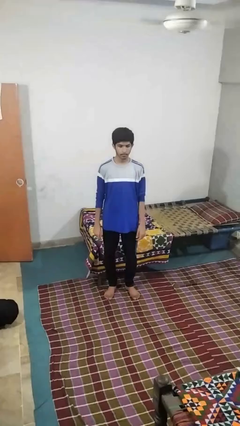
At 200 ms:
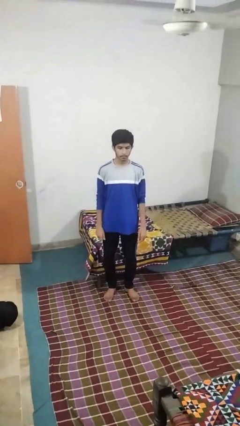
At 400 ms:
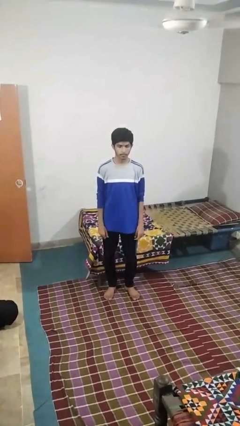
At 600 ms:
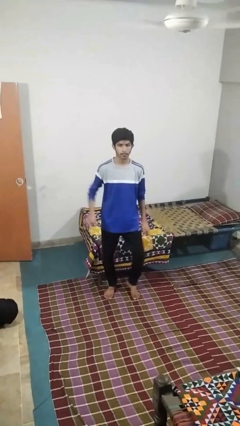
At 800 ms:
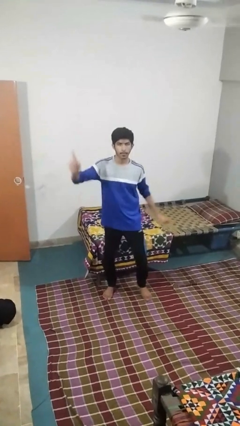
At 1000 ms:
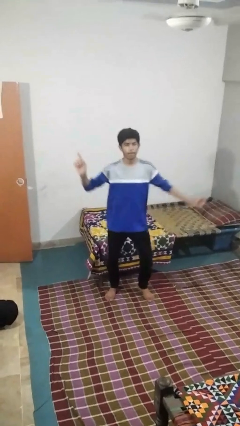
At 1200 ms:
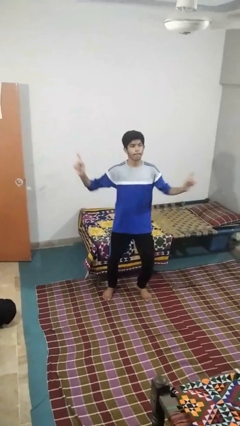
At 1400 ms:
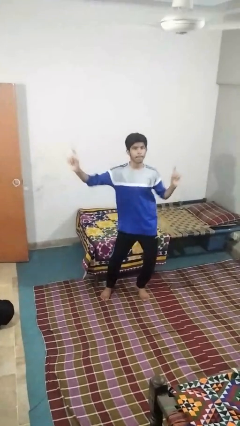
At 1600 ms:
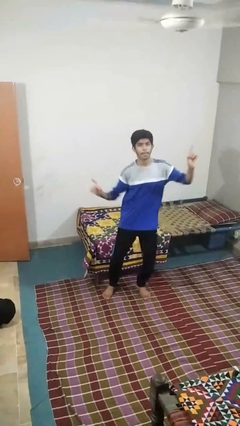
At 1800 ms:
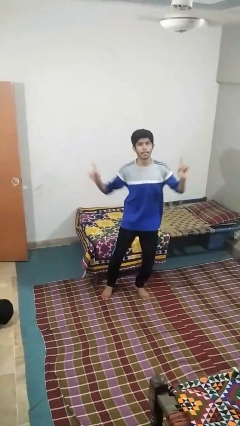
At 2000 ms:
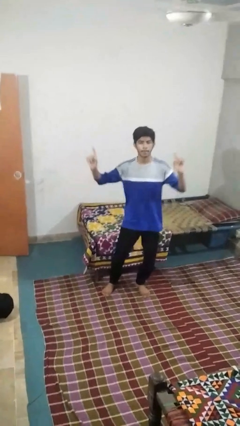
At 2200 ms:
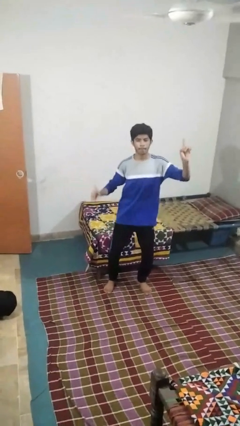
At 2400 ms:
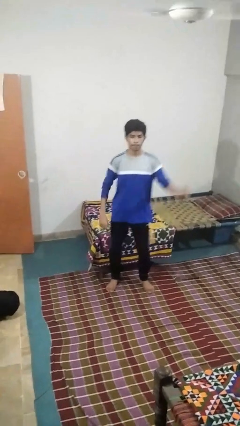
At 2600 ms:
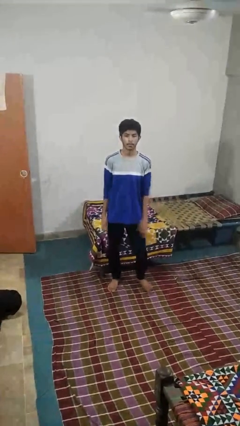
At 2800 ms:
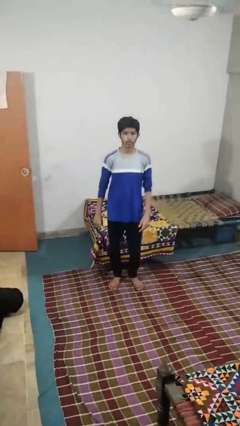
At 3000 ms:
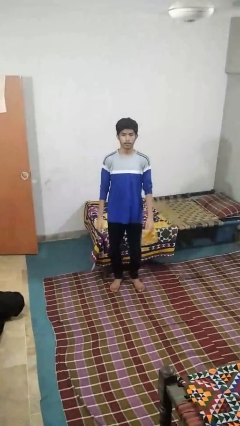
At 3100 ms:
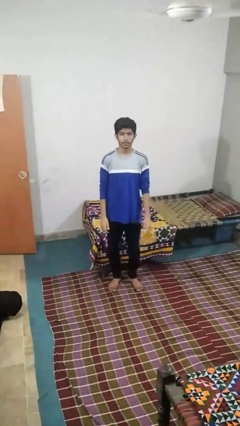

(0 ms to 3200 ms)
person dances in place

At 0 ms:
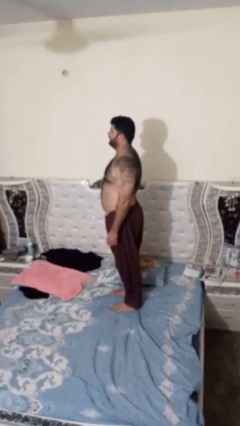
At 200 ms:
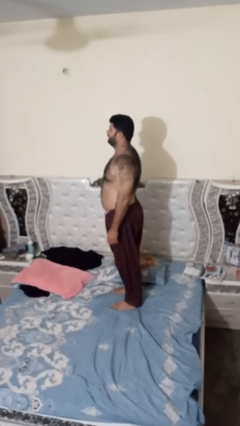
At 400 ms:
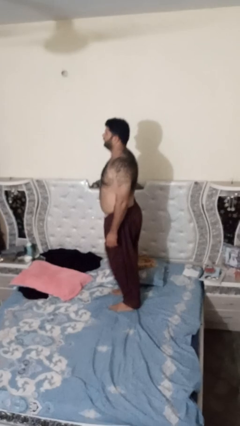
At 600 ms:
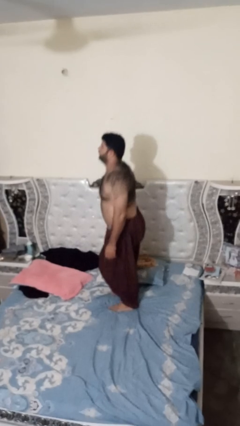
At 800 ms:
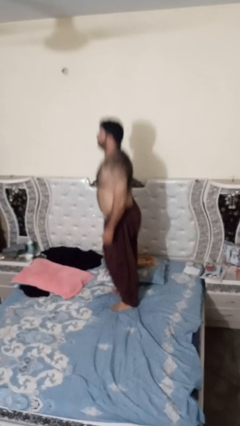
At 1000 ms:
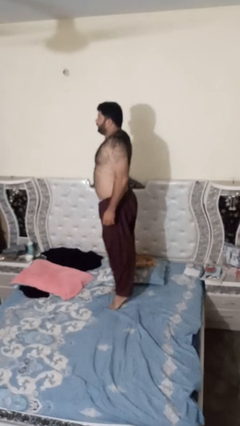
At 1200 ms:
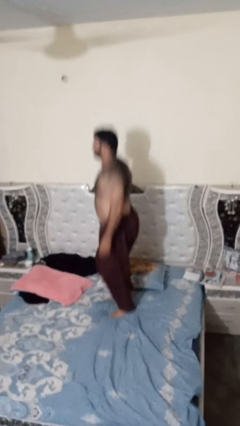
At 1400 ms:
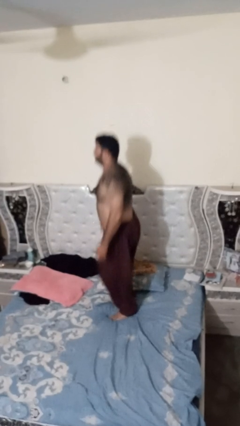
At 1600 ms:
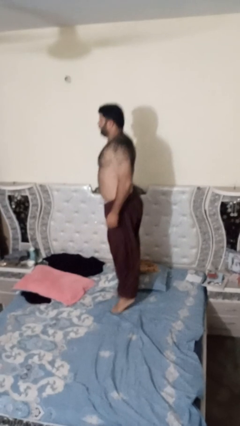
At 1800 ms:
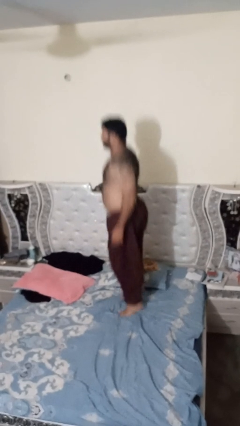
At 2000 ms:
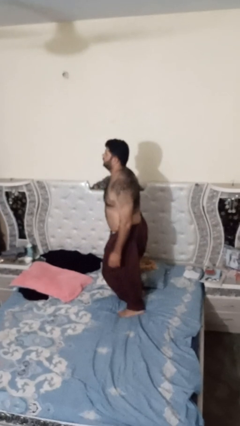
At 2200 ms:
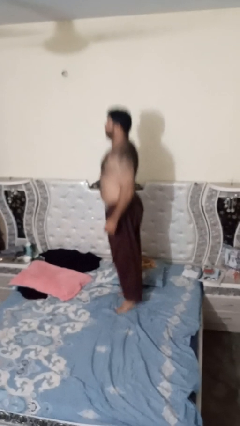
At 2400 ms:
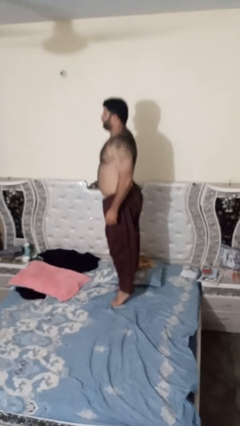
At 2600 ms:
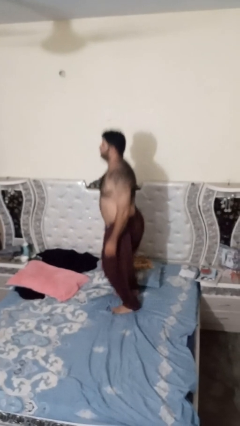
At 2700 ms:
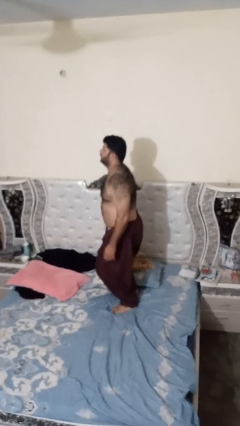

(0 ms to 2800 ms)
person jumps on bed

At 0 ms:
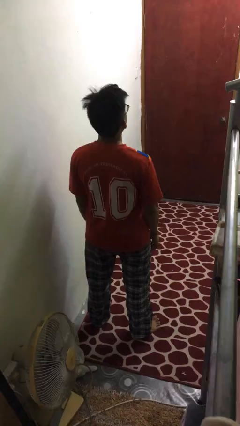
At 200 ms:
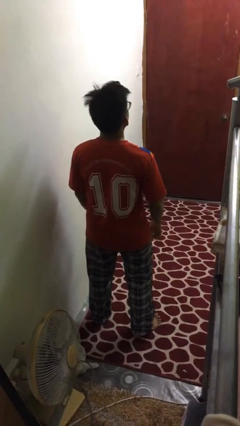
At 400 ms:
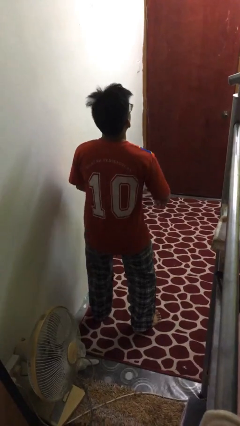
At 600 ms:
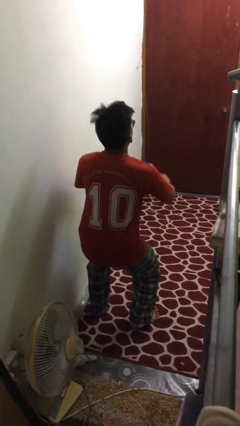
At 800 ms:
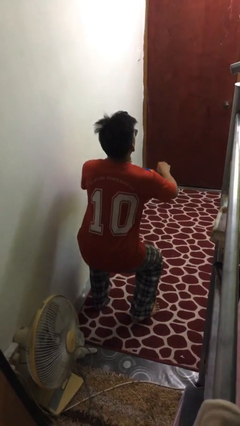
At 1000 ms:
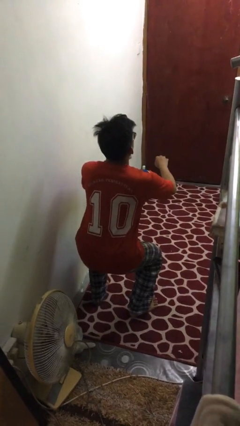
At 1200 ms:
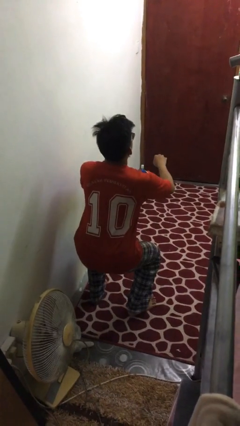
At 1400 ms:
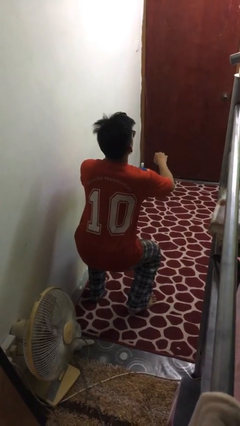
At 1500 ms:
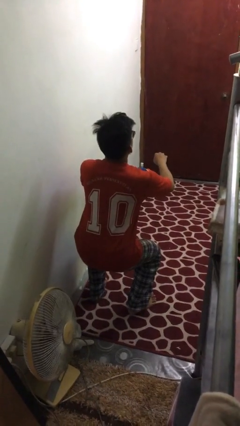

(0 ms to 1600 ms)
person squats

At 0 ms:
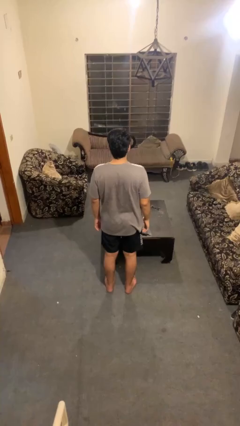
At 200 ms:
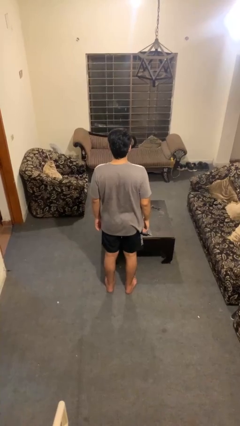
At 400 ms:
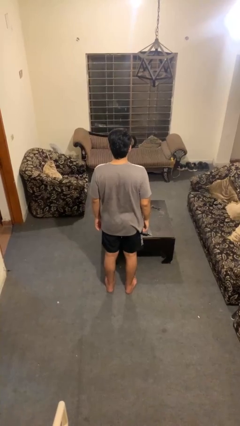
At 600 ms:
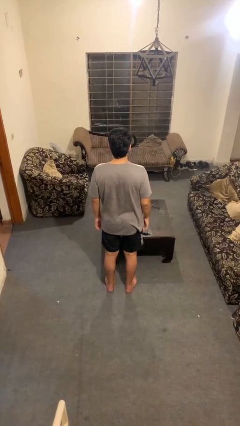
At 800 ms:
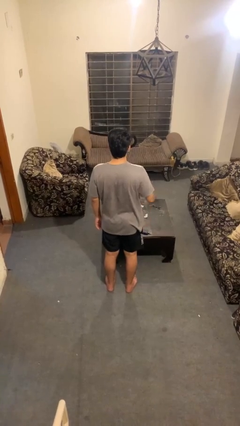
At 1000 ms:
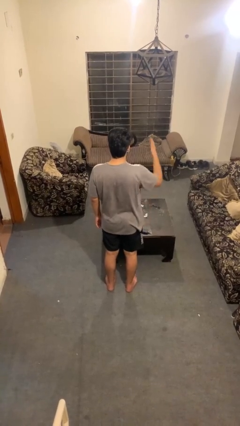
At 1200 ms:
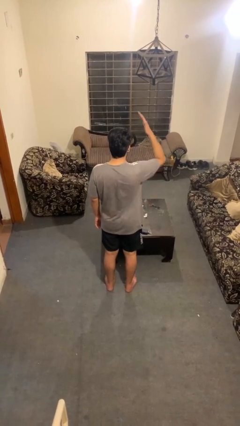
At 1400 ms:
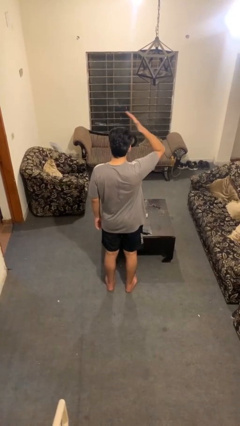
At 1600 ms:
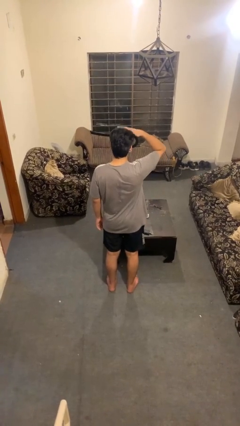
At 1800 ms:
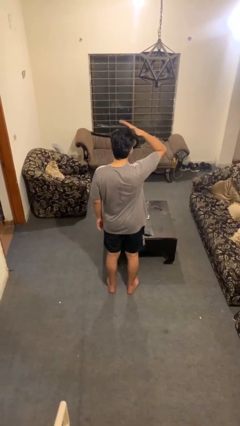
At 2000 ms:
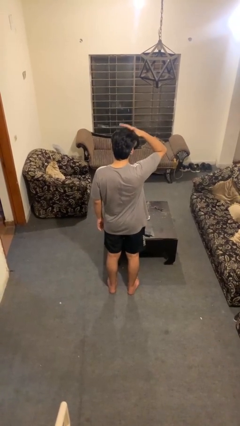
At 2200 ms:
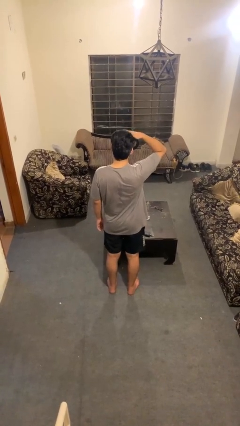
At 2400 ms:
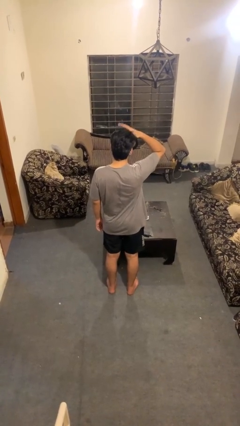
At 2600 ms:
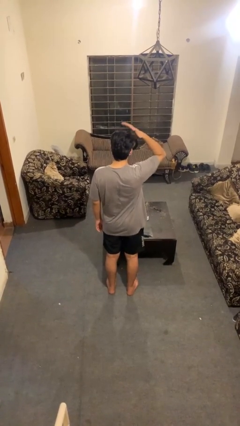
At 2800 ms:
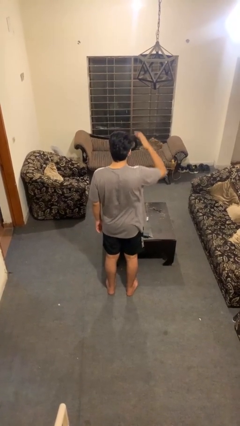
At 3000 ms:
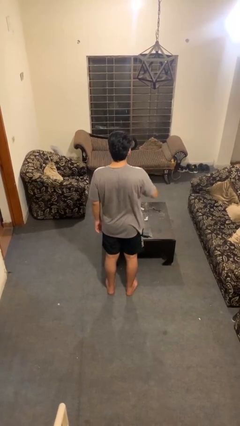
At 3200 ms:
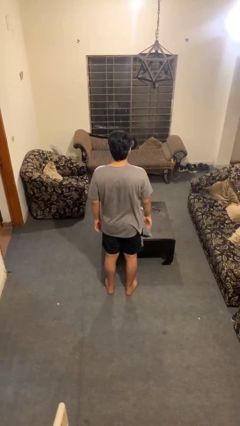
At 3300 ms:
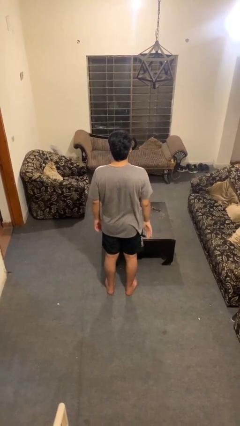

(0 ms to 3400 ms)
person pats head

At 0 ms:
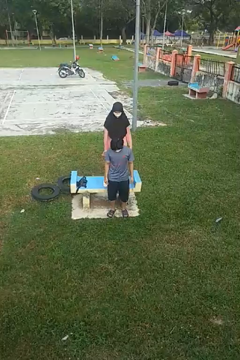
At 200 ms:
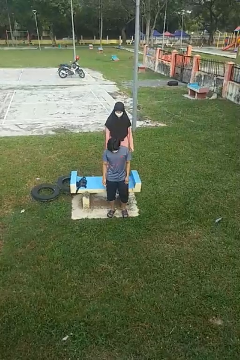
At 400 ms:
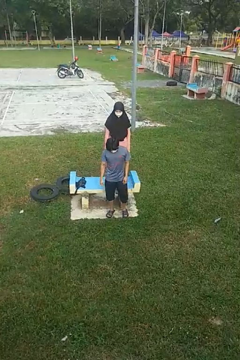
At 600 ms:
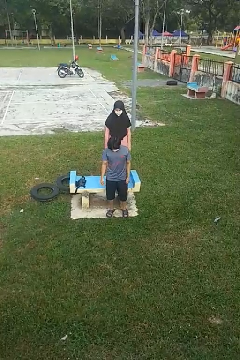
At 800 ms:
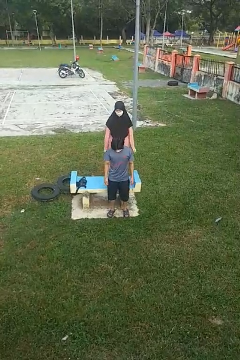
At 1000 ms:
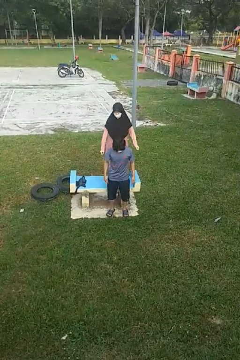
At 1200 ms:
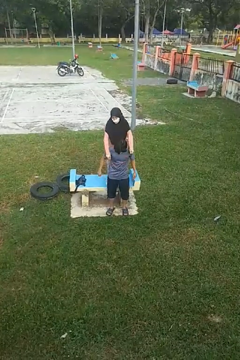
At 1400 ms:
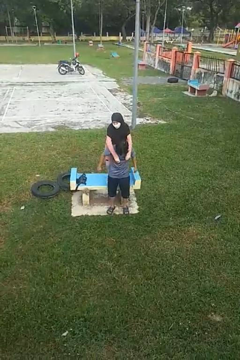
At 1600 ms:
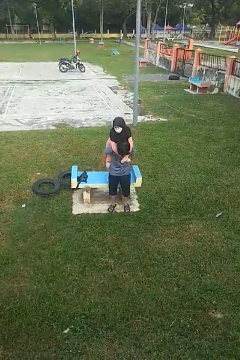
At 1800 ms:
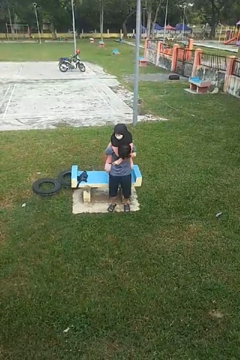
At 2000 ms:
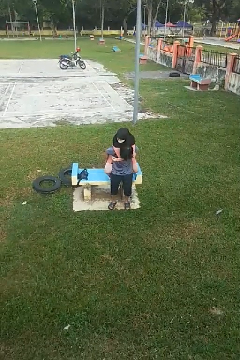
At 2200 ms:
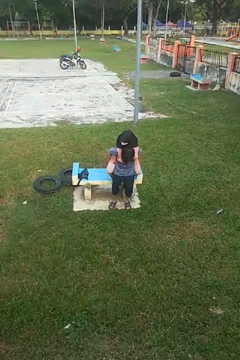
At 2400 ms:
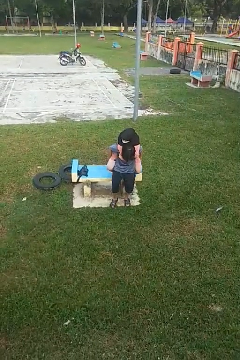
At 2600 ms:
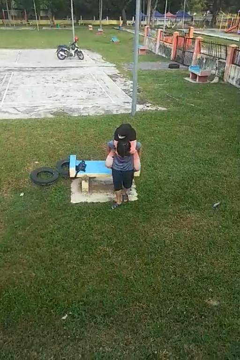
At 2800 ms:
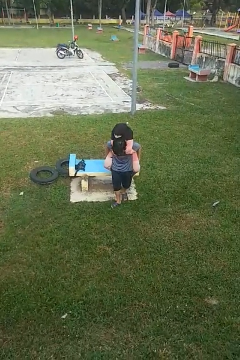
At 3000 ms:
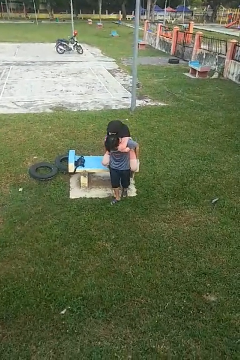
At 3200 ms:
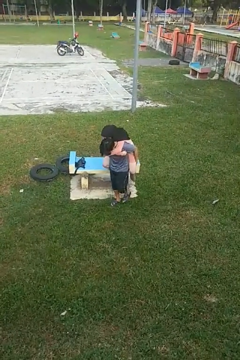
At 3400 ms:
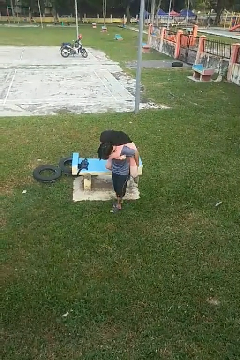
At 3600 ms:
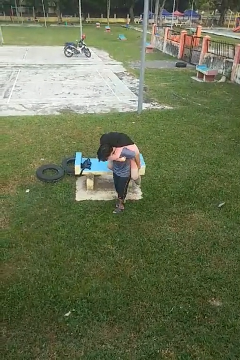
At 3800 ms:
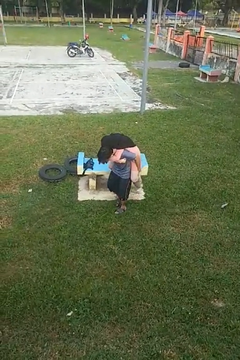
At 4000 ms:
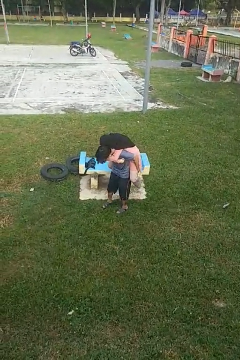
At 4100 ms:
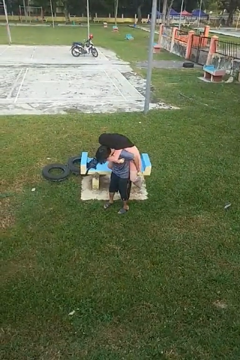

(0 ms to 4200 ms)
person carries person over shoulder

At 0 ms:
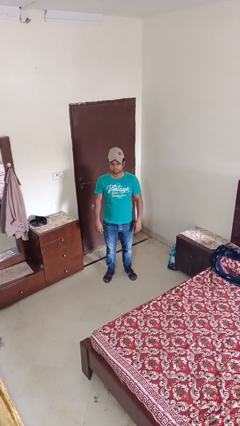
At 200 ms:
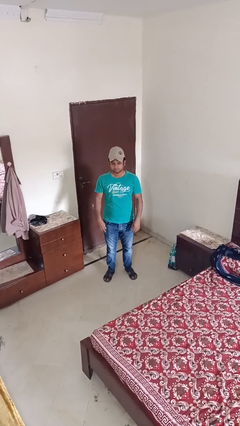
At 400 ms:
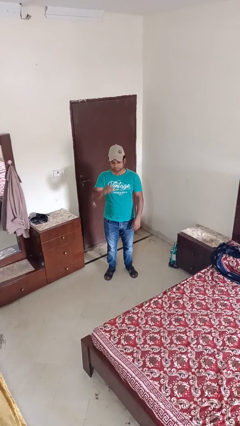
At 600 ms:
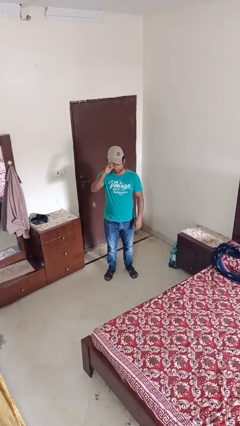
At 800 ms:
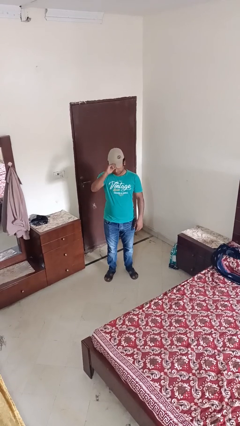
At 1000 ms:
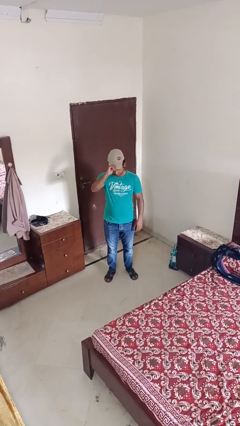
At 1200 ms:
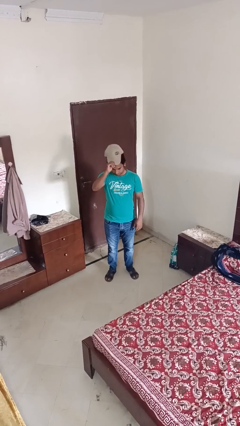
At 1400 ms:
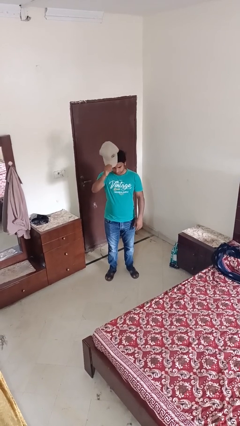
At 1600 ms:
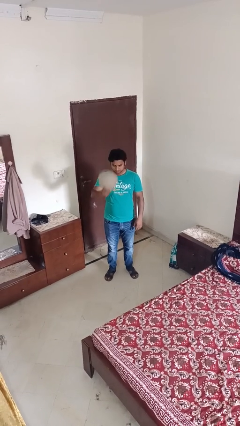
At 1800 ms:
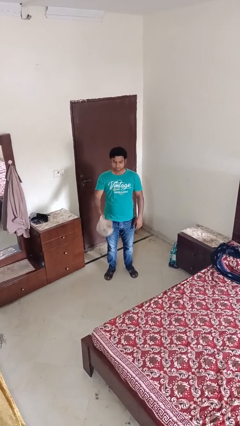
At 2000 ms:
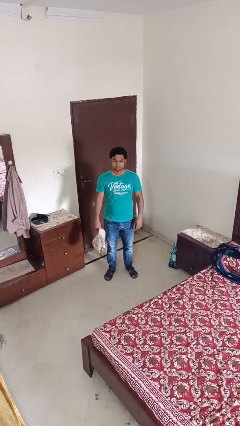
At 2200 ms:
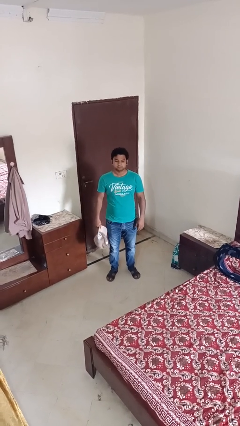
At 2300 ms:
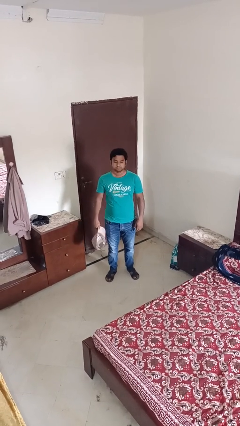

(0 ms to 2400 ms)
person takes off hat

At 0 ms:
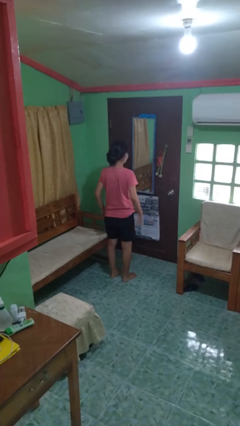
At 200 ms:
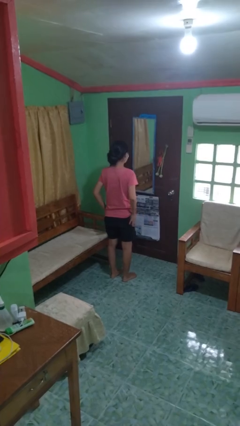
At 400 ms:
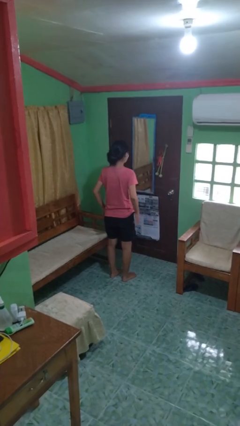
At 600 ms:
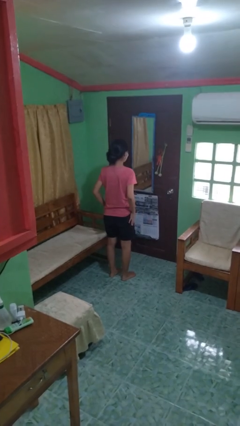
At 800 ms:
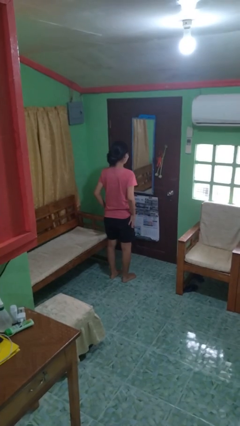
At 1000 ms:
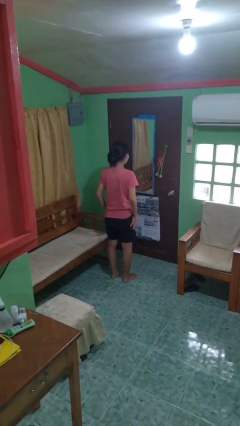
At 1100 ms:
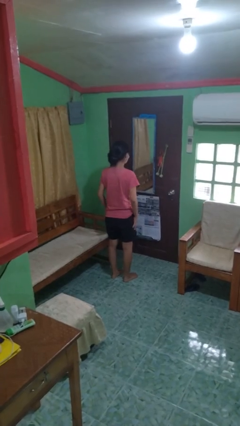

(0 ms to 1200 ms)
person slaps hands on thighs
